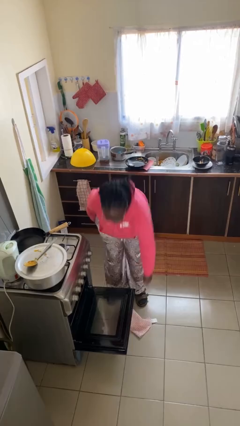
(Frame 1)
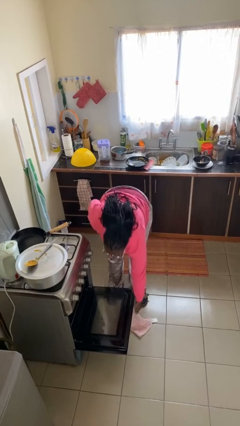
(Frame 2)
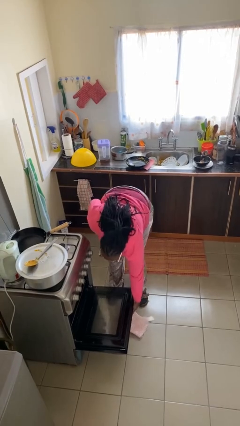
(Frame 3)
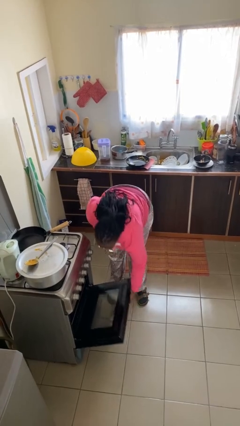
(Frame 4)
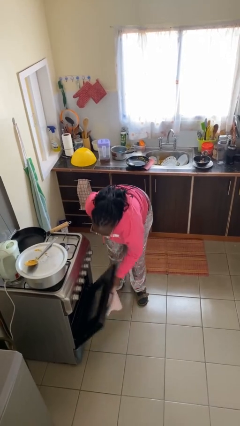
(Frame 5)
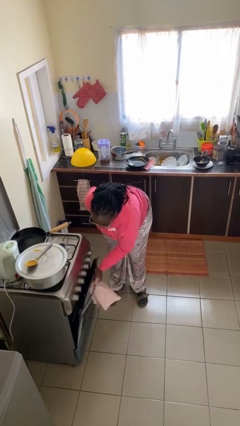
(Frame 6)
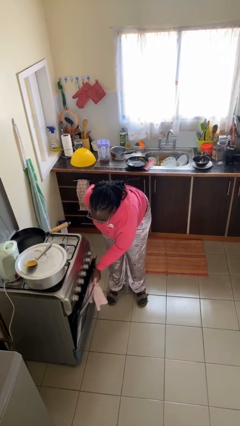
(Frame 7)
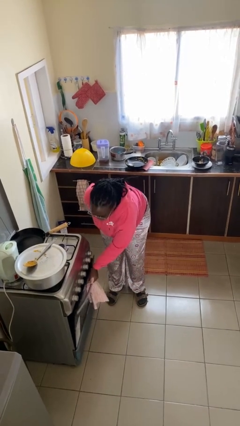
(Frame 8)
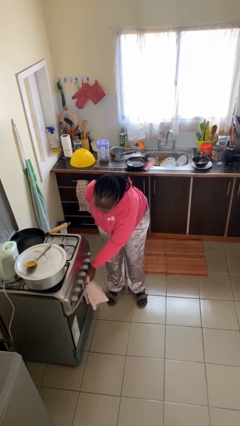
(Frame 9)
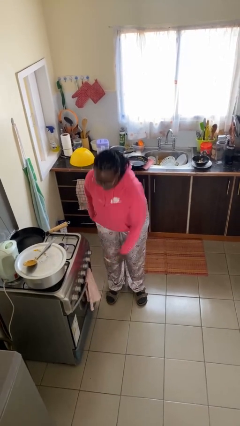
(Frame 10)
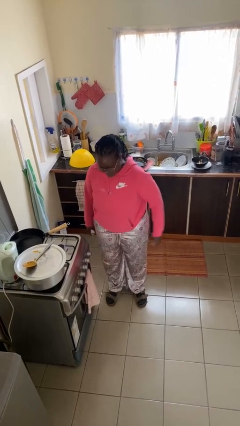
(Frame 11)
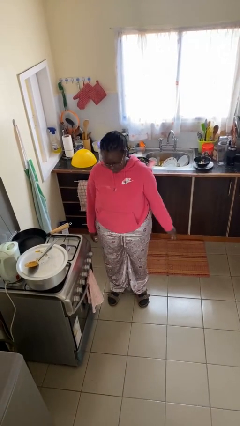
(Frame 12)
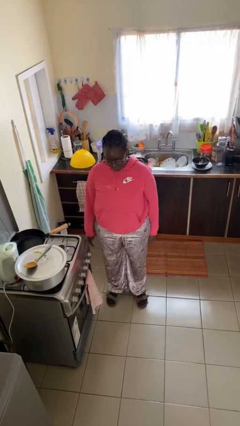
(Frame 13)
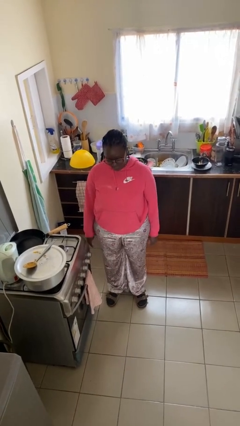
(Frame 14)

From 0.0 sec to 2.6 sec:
person closes oven door

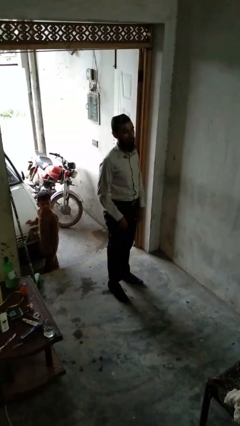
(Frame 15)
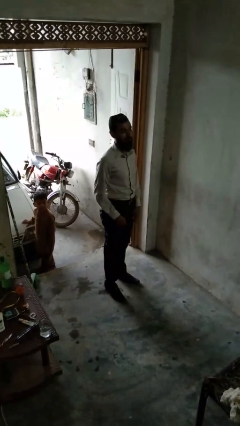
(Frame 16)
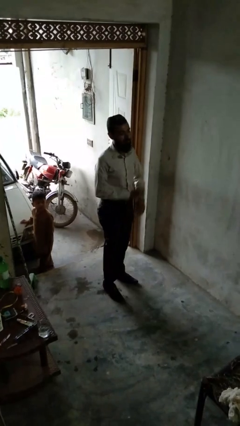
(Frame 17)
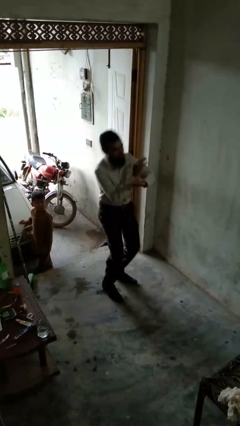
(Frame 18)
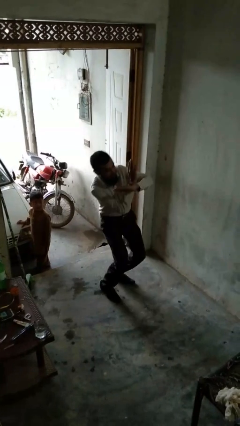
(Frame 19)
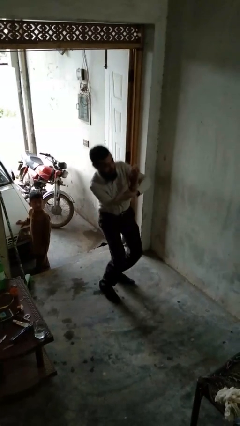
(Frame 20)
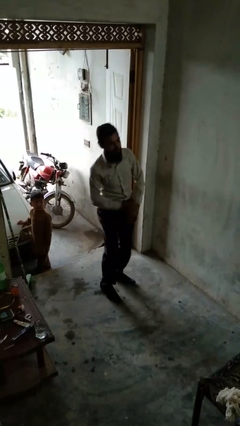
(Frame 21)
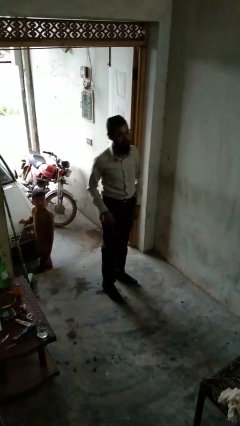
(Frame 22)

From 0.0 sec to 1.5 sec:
person karate chop

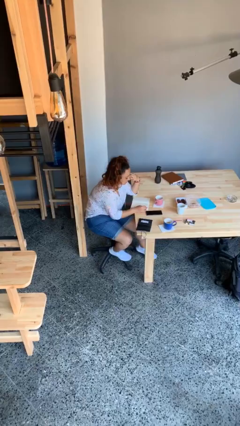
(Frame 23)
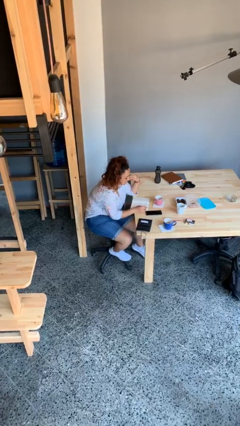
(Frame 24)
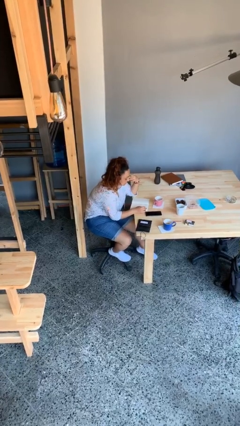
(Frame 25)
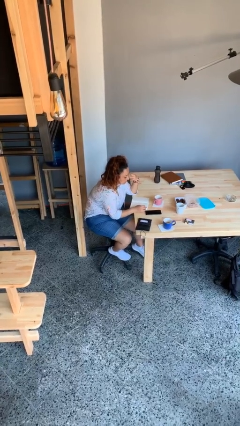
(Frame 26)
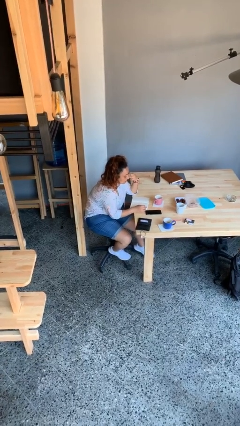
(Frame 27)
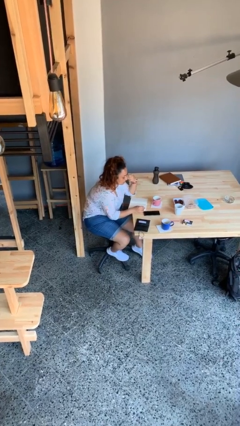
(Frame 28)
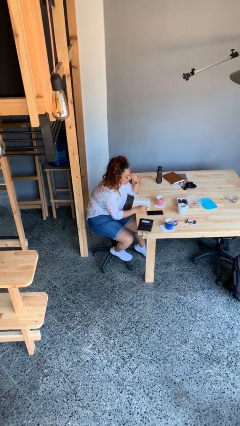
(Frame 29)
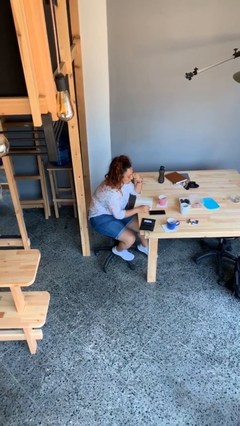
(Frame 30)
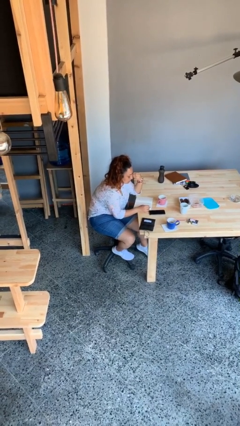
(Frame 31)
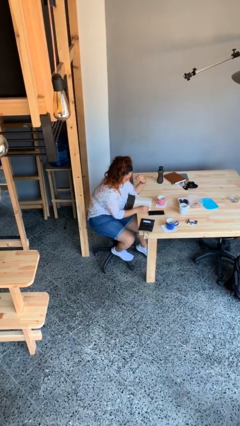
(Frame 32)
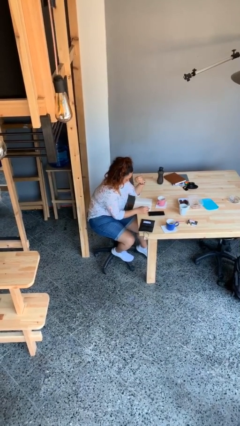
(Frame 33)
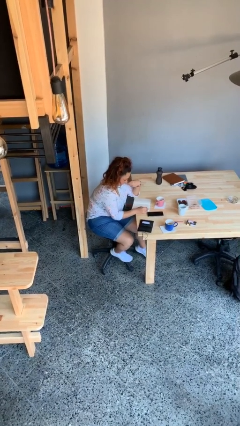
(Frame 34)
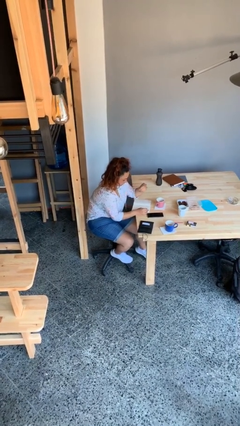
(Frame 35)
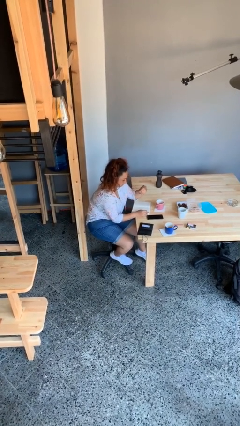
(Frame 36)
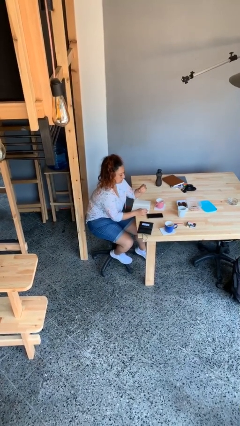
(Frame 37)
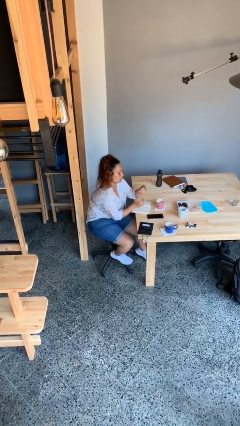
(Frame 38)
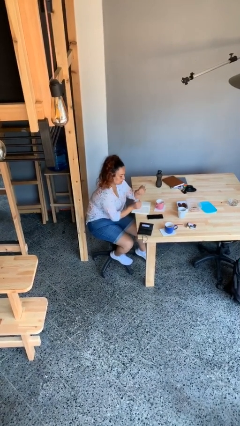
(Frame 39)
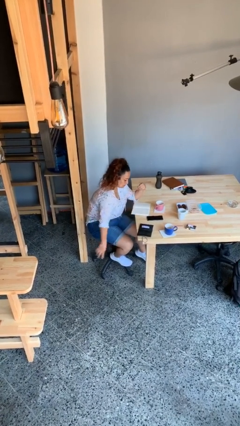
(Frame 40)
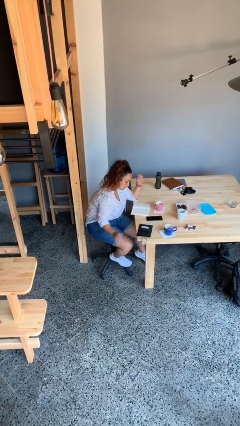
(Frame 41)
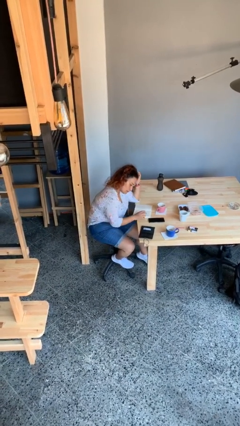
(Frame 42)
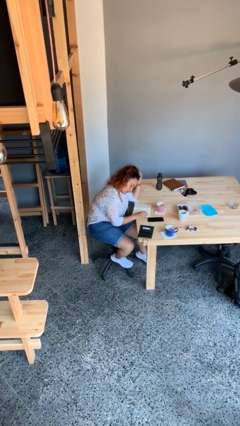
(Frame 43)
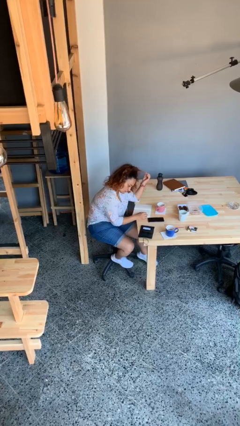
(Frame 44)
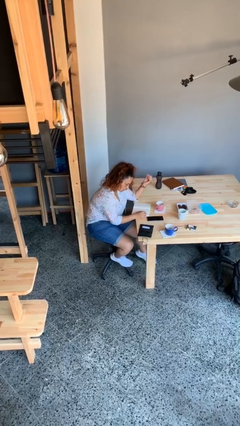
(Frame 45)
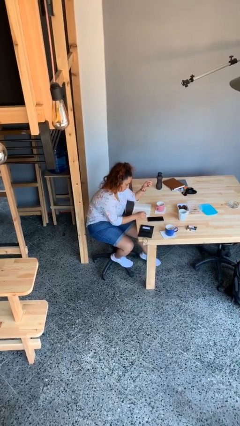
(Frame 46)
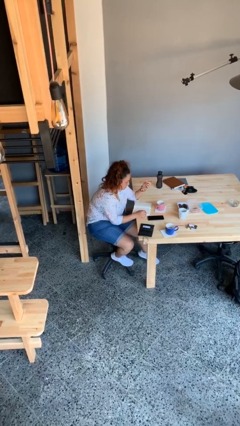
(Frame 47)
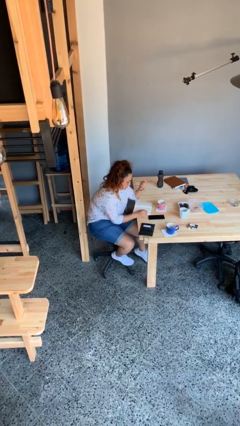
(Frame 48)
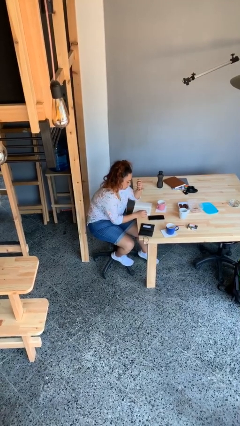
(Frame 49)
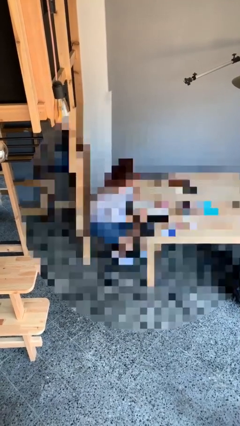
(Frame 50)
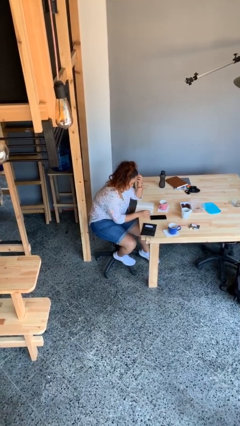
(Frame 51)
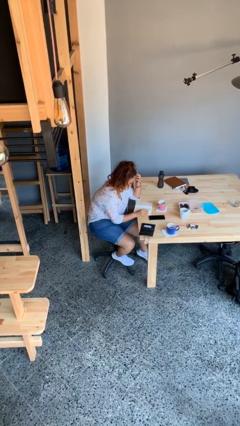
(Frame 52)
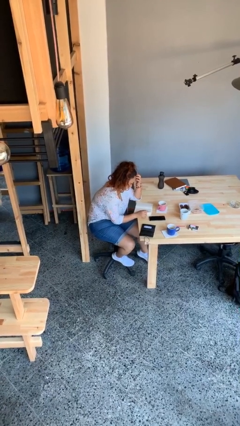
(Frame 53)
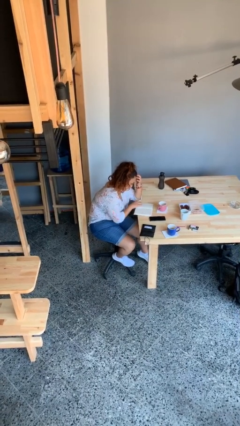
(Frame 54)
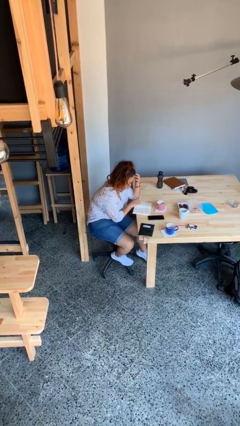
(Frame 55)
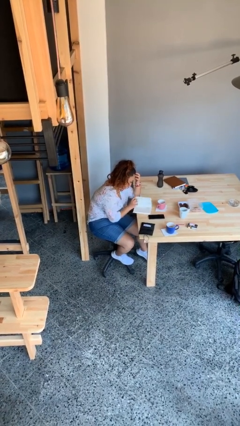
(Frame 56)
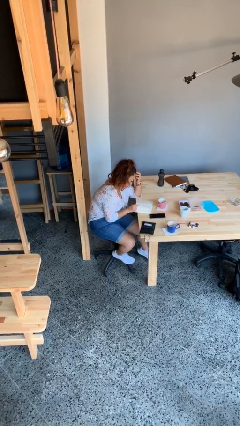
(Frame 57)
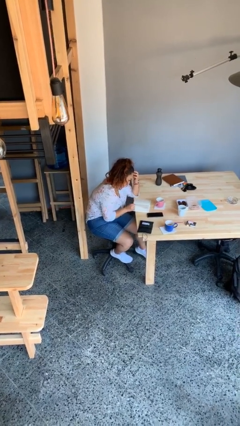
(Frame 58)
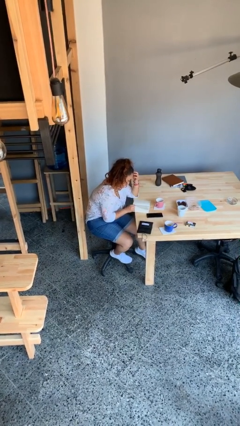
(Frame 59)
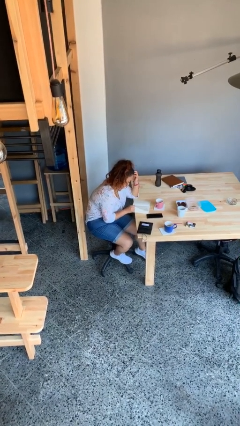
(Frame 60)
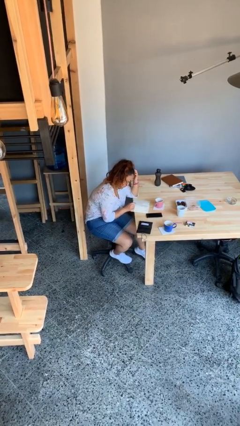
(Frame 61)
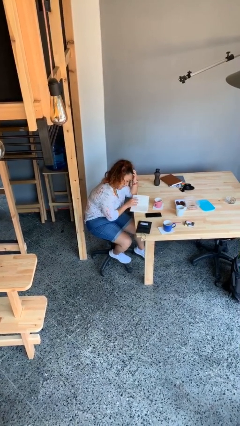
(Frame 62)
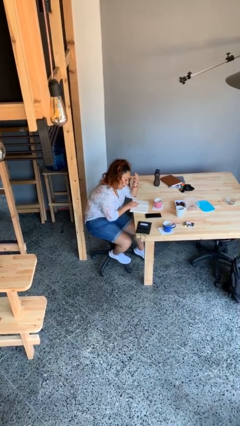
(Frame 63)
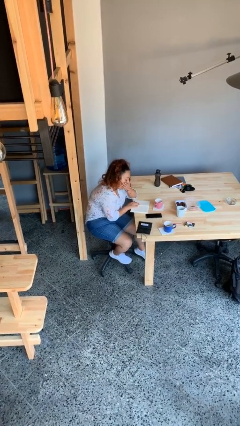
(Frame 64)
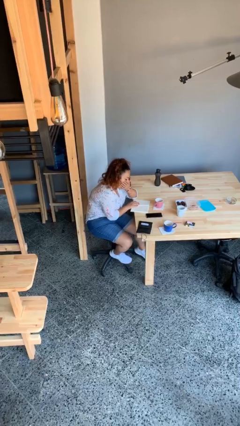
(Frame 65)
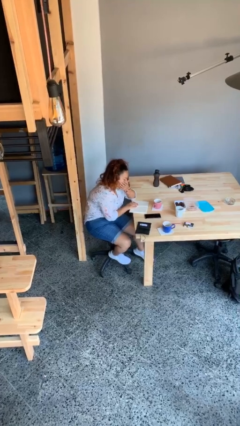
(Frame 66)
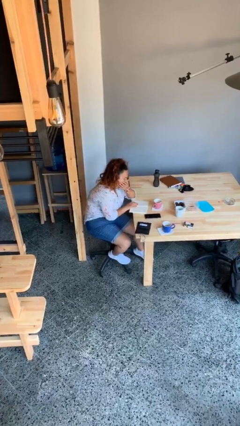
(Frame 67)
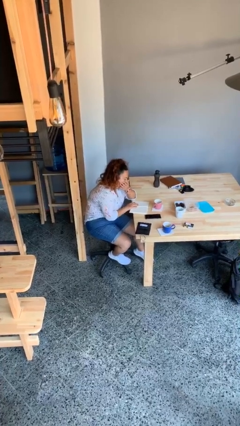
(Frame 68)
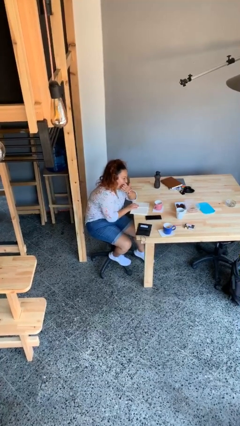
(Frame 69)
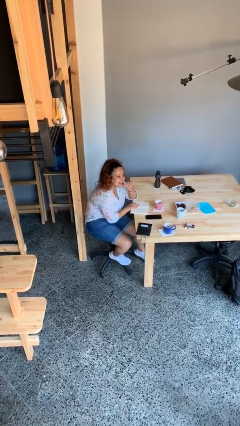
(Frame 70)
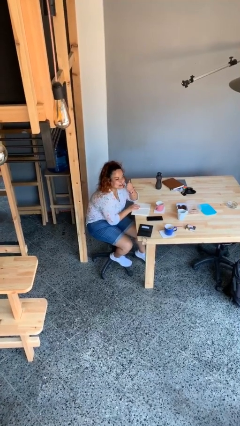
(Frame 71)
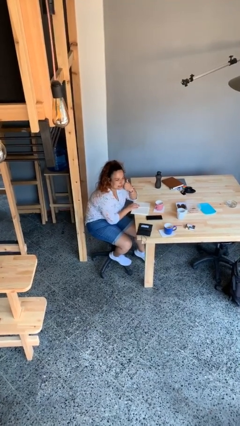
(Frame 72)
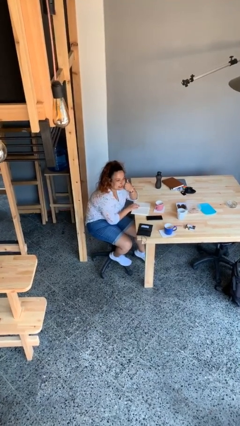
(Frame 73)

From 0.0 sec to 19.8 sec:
person reads document

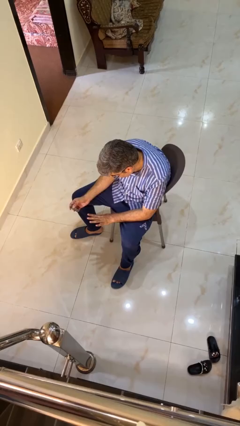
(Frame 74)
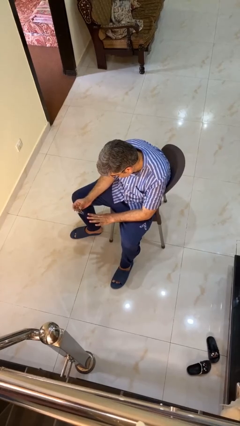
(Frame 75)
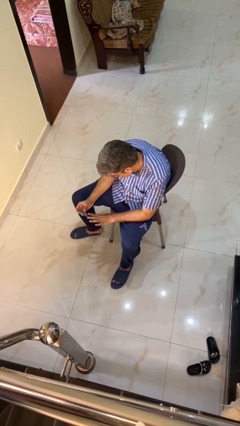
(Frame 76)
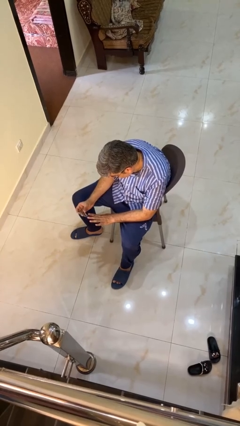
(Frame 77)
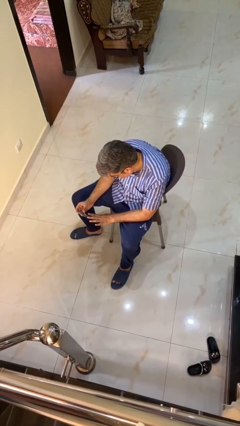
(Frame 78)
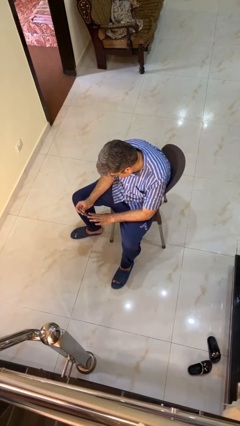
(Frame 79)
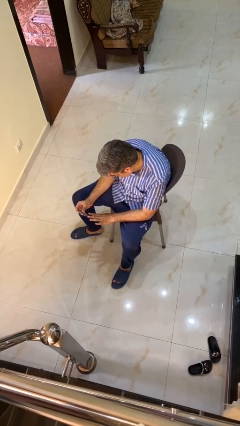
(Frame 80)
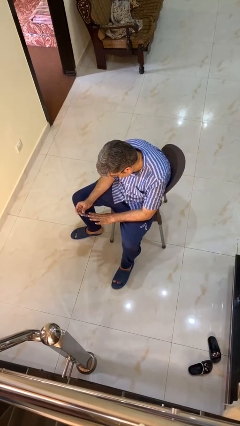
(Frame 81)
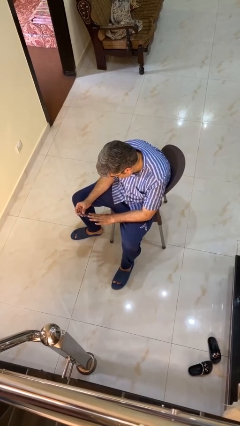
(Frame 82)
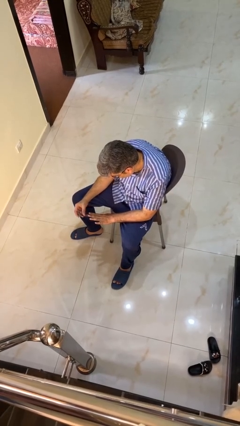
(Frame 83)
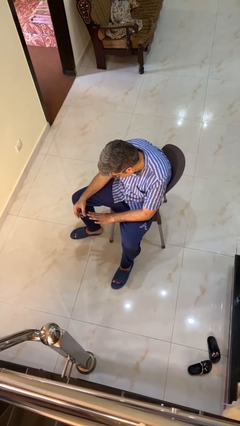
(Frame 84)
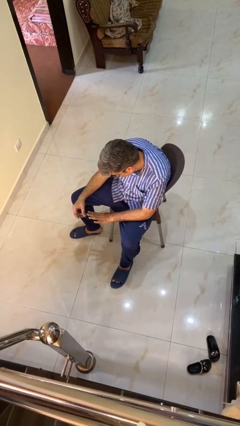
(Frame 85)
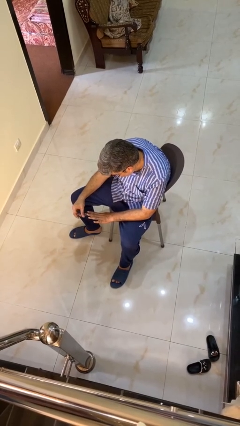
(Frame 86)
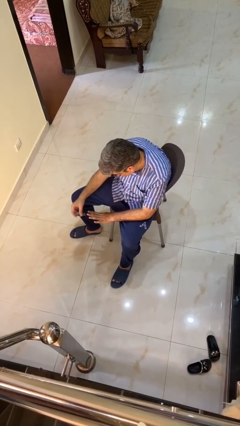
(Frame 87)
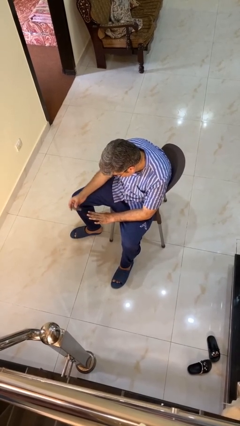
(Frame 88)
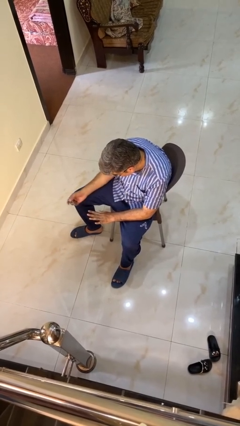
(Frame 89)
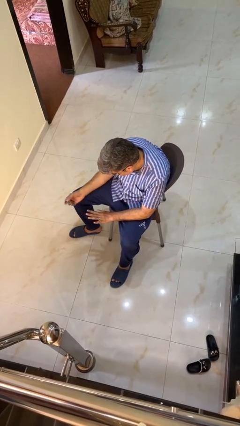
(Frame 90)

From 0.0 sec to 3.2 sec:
person clips fingernails

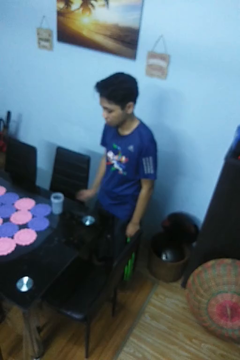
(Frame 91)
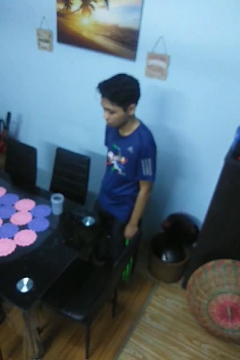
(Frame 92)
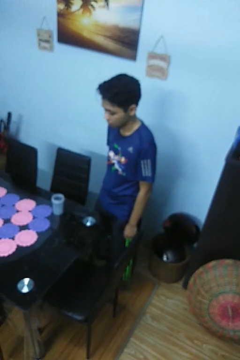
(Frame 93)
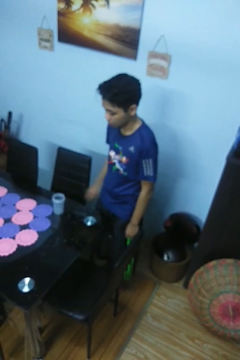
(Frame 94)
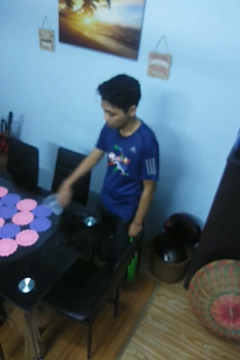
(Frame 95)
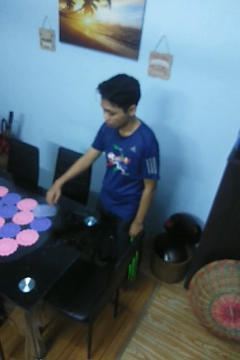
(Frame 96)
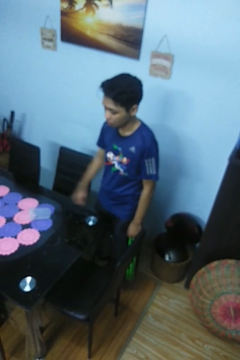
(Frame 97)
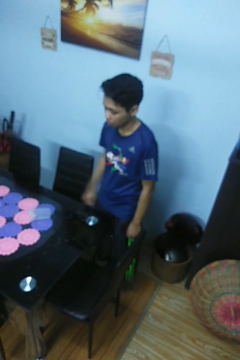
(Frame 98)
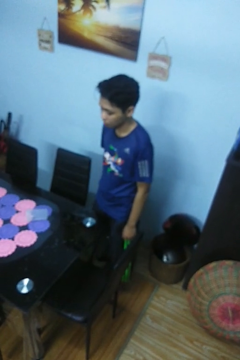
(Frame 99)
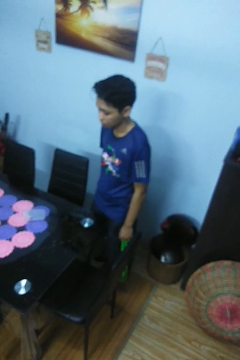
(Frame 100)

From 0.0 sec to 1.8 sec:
person knocks over glass
